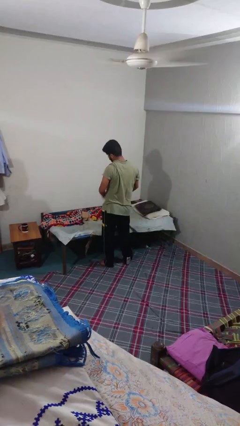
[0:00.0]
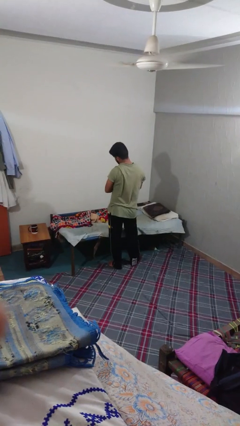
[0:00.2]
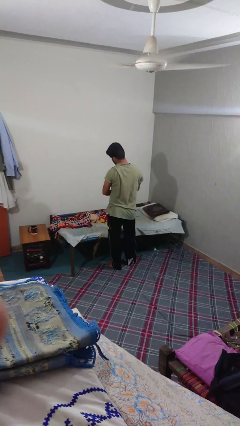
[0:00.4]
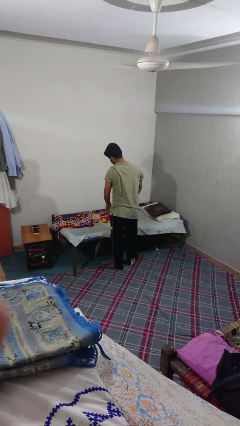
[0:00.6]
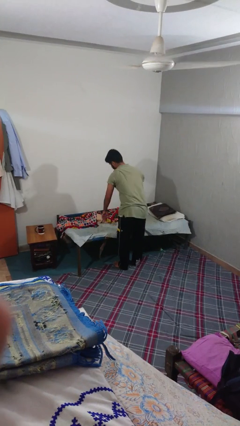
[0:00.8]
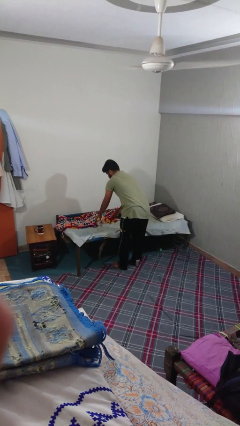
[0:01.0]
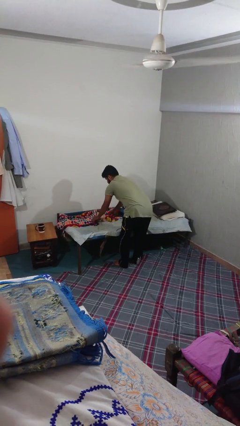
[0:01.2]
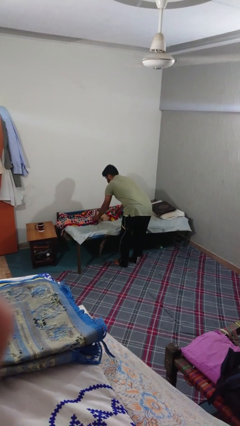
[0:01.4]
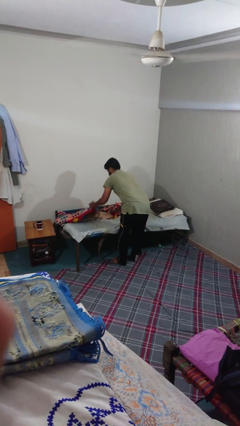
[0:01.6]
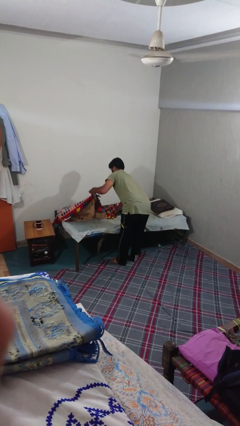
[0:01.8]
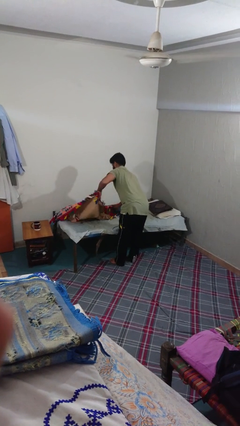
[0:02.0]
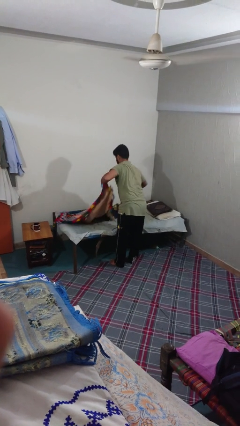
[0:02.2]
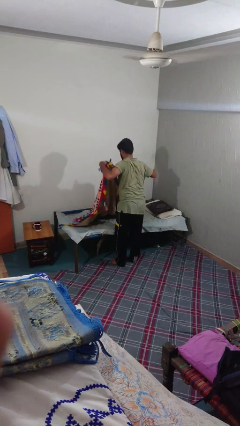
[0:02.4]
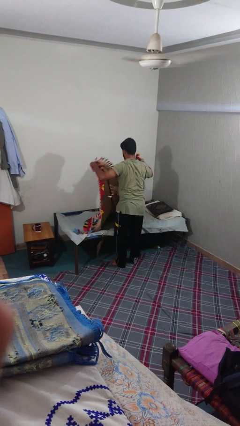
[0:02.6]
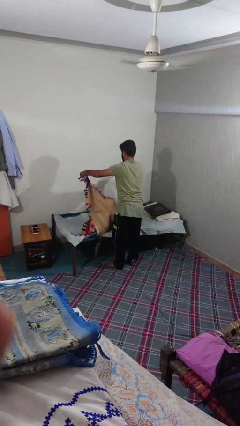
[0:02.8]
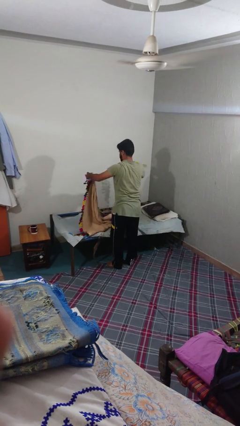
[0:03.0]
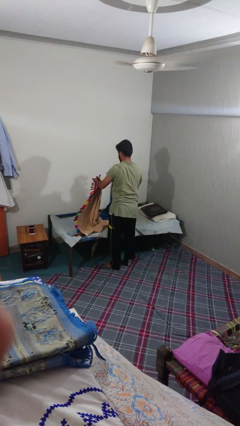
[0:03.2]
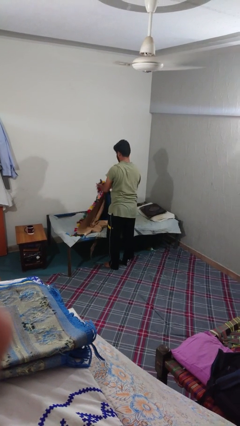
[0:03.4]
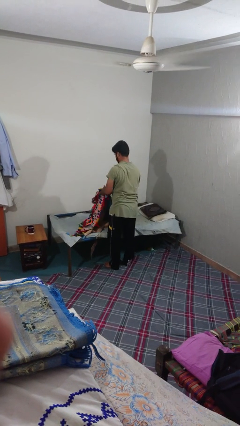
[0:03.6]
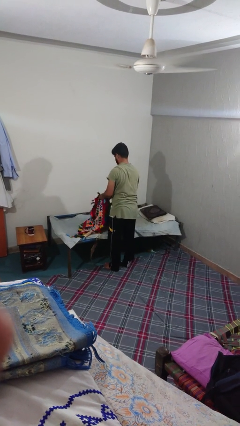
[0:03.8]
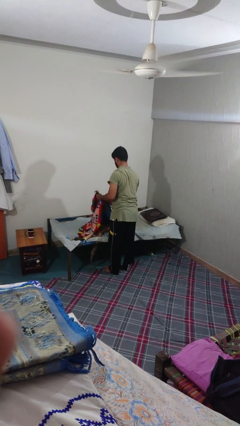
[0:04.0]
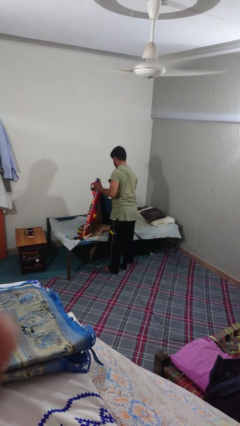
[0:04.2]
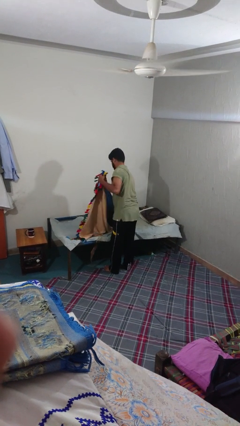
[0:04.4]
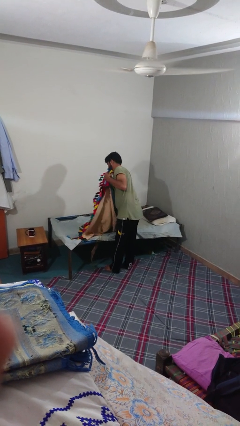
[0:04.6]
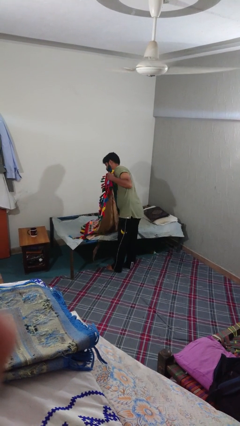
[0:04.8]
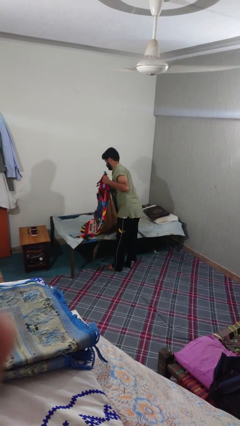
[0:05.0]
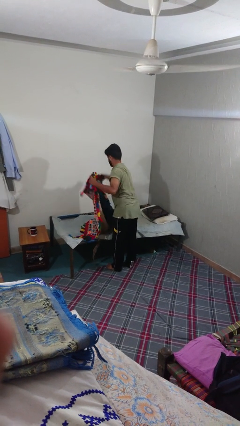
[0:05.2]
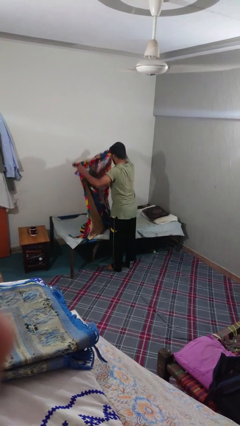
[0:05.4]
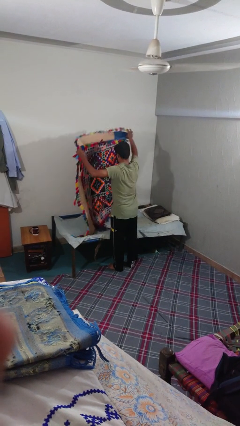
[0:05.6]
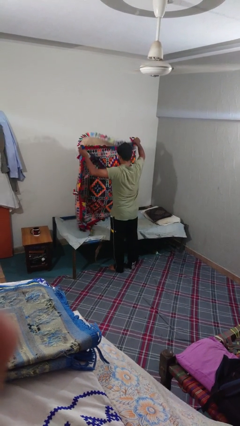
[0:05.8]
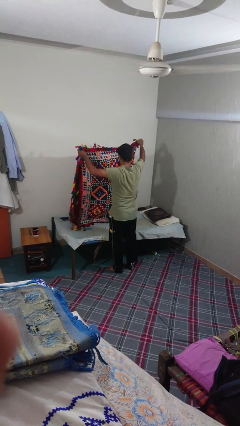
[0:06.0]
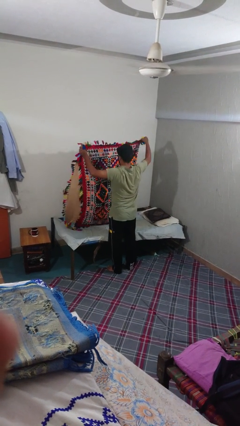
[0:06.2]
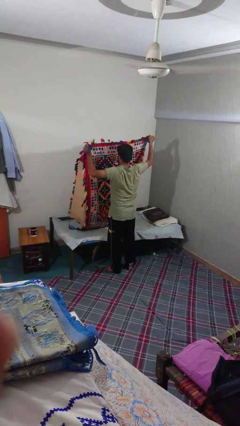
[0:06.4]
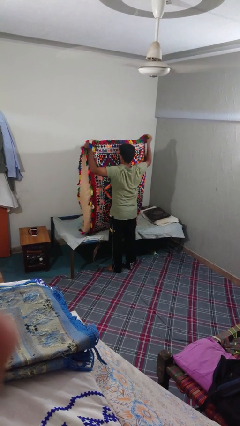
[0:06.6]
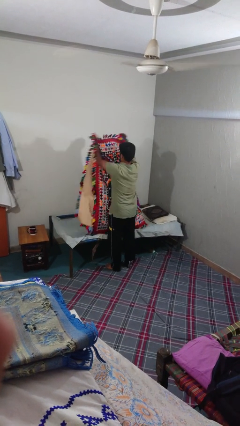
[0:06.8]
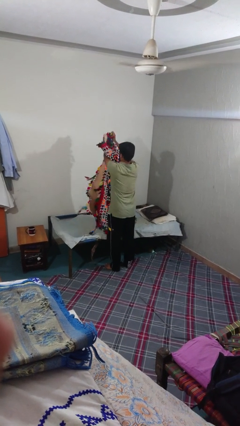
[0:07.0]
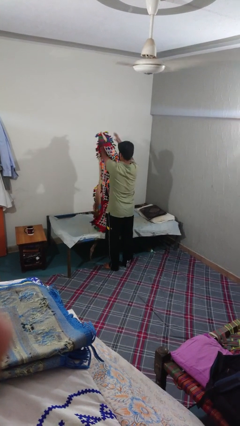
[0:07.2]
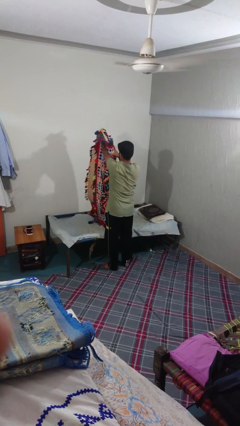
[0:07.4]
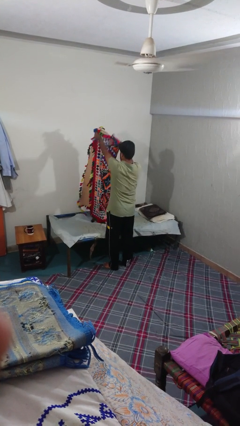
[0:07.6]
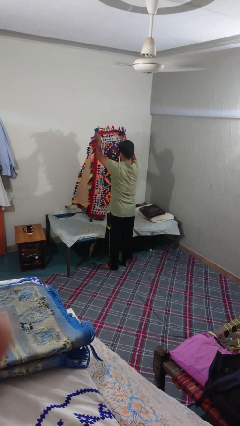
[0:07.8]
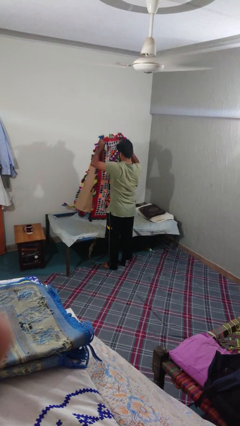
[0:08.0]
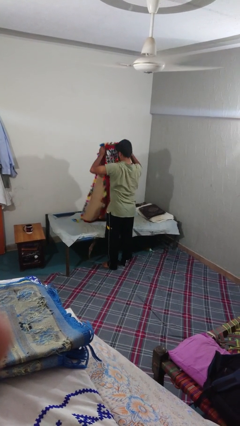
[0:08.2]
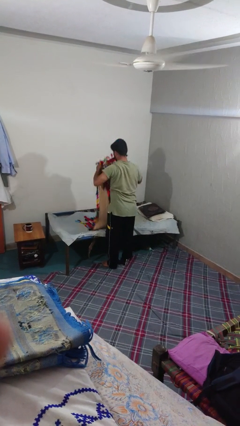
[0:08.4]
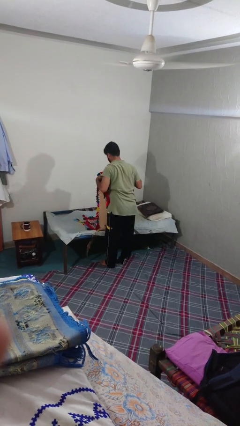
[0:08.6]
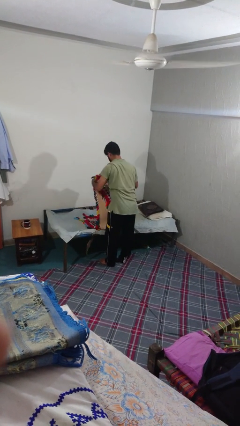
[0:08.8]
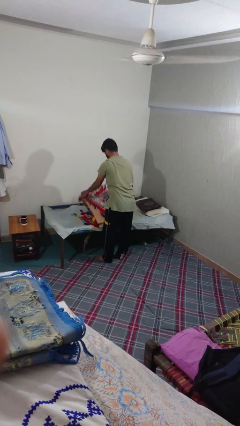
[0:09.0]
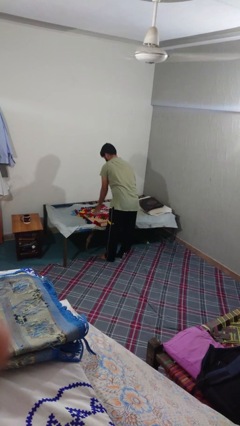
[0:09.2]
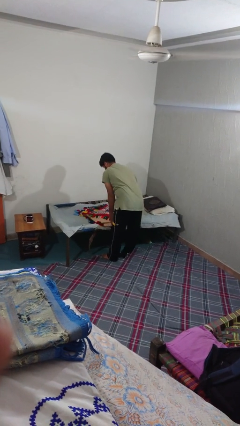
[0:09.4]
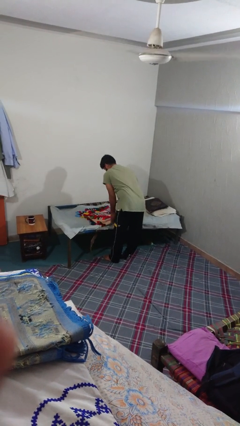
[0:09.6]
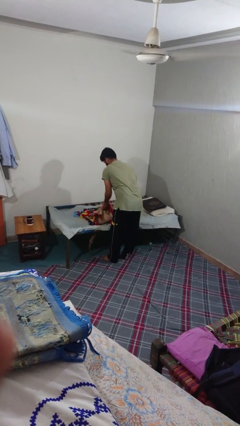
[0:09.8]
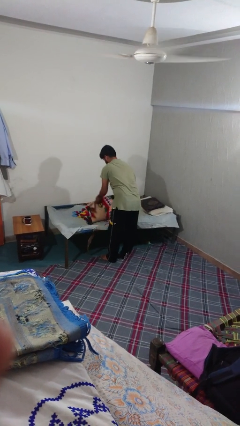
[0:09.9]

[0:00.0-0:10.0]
person folds blanket

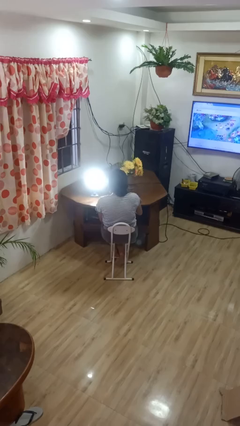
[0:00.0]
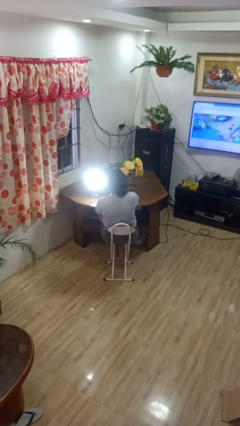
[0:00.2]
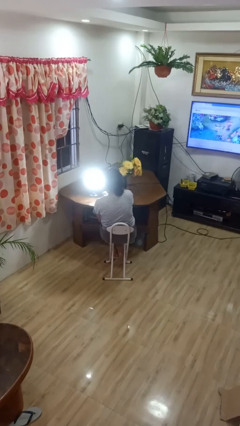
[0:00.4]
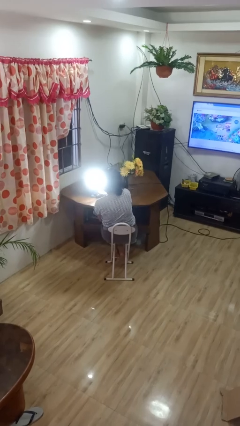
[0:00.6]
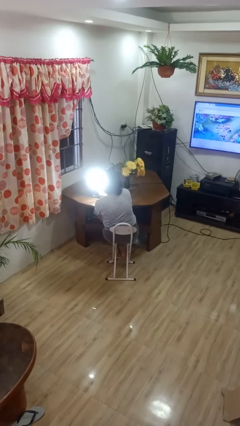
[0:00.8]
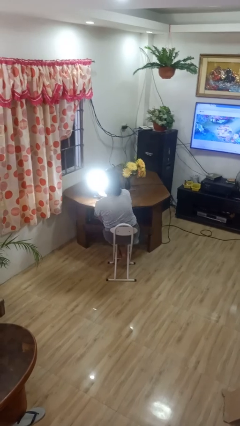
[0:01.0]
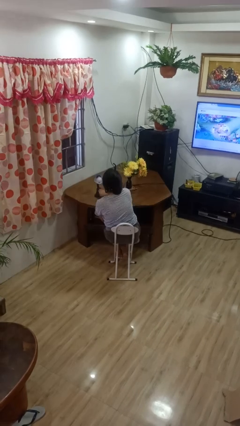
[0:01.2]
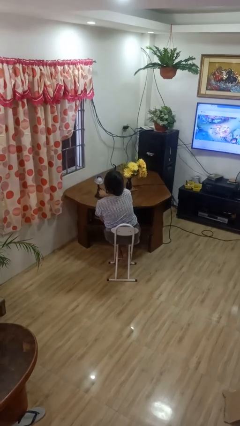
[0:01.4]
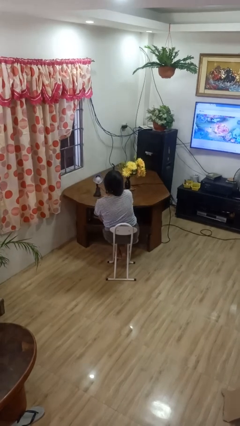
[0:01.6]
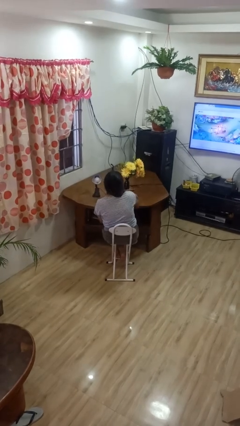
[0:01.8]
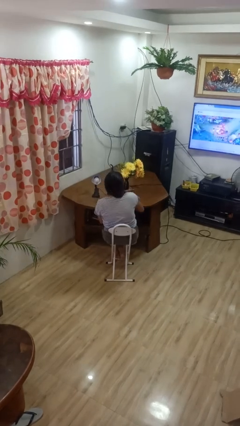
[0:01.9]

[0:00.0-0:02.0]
person turns off lamp

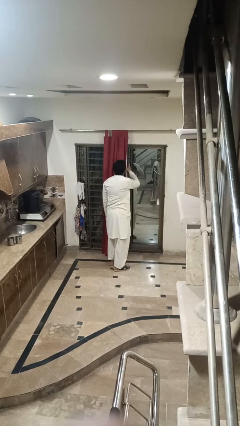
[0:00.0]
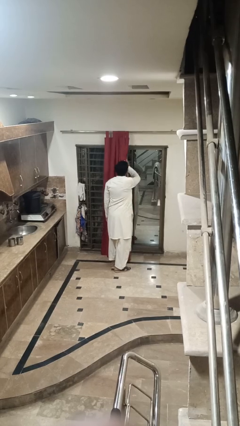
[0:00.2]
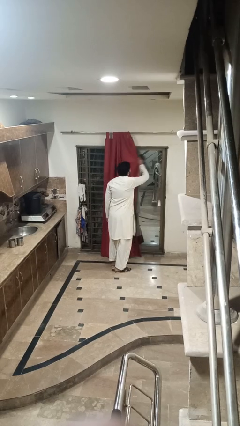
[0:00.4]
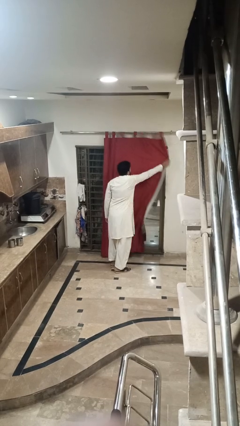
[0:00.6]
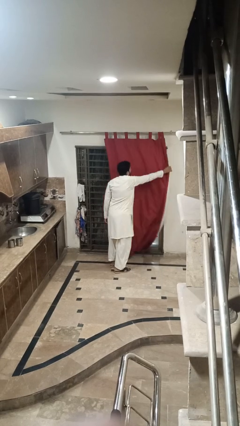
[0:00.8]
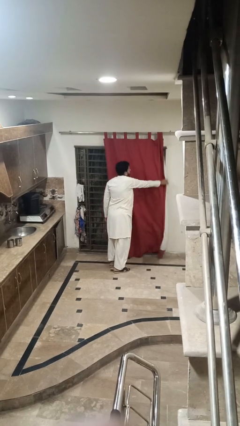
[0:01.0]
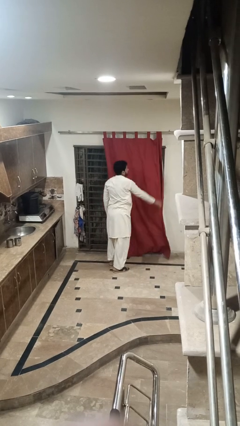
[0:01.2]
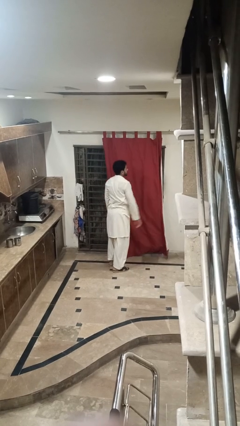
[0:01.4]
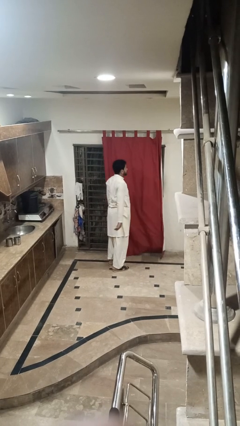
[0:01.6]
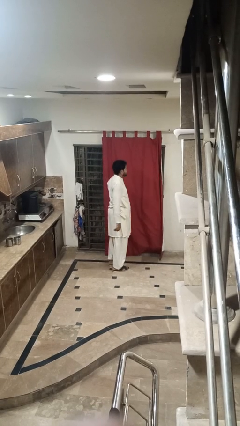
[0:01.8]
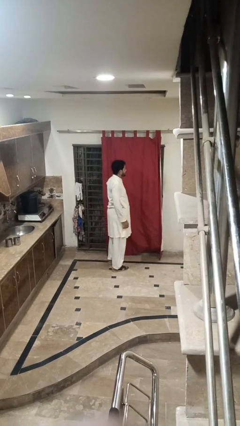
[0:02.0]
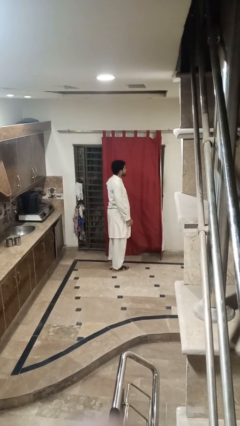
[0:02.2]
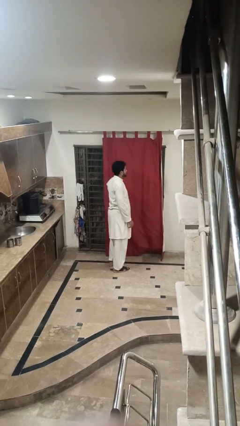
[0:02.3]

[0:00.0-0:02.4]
person closes curtains

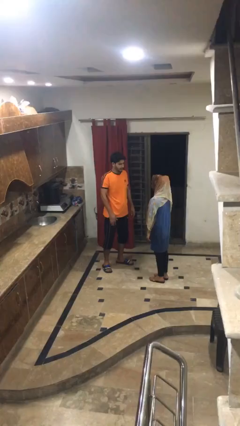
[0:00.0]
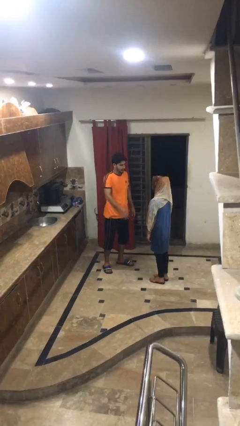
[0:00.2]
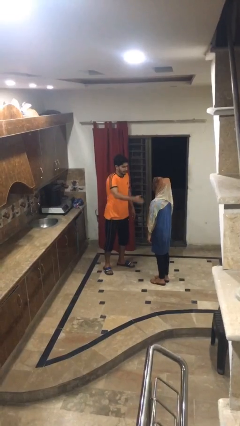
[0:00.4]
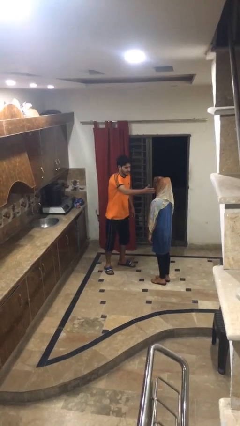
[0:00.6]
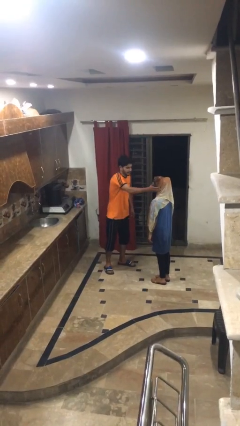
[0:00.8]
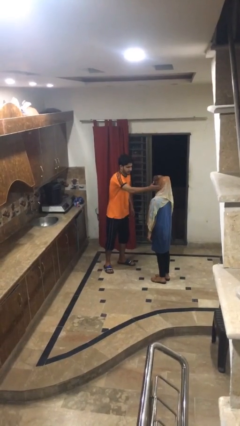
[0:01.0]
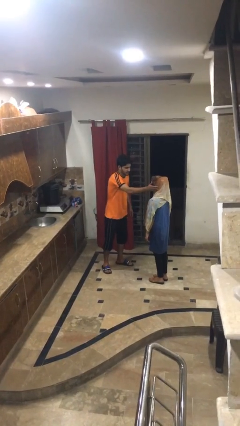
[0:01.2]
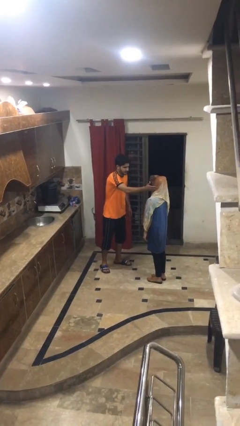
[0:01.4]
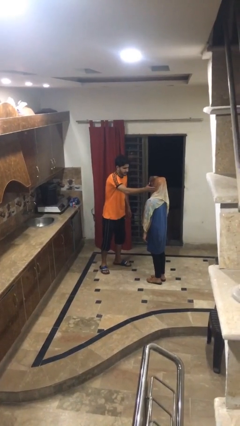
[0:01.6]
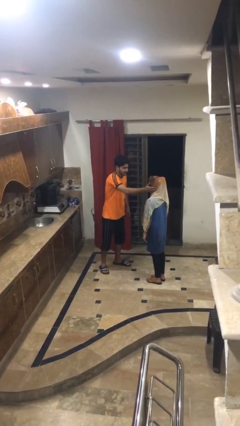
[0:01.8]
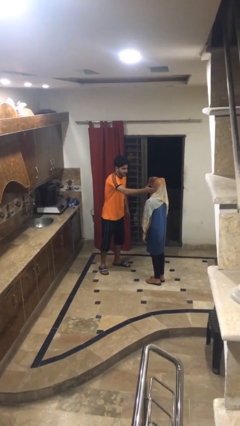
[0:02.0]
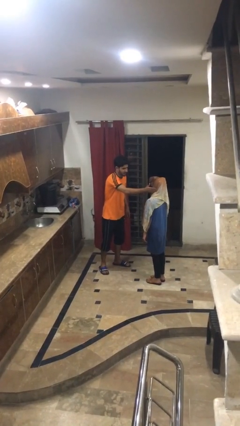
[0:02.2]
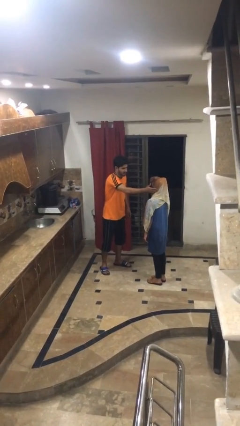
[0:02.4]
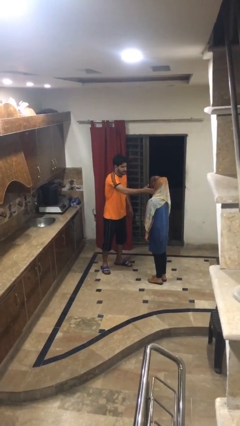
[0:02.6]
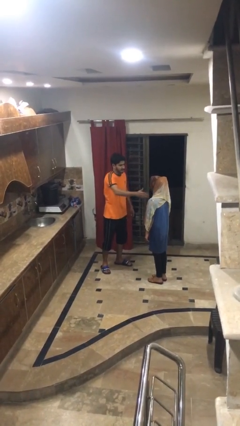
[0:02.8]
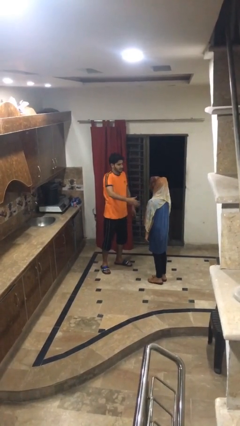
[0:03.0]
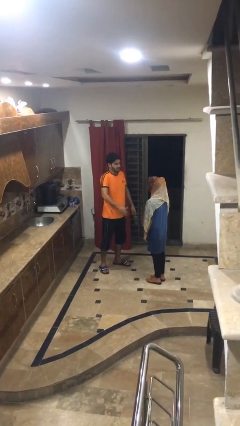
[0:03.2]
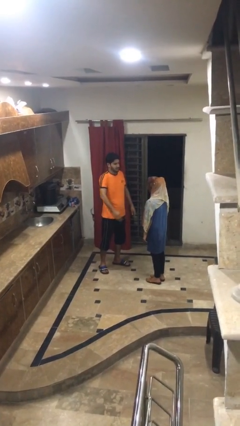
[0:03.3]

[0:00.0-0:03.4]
person touches face of person

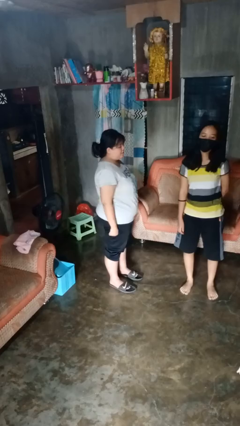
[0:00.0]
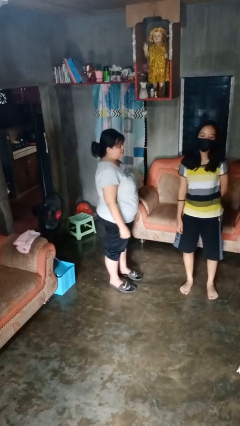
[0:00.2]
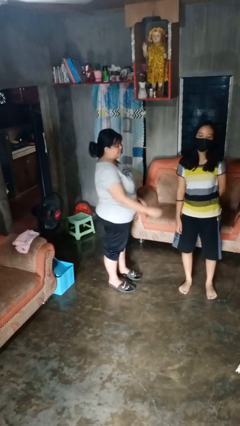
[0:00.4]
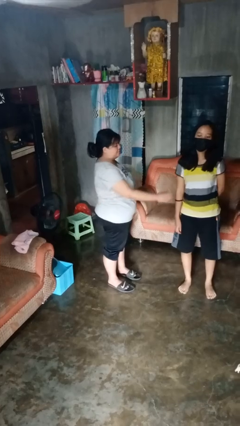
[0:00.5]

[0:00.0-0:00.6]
person grabs person by bicep
